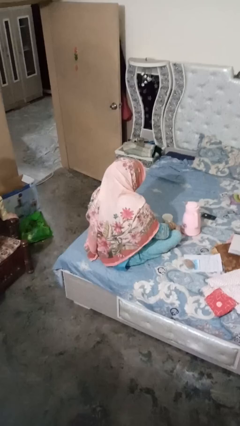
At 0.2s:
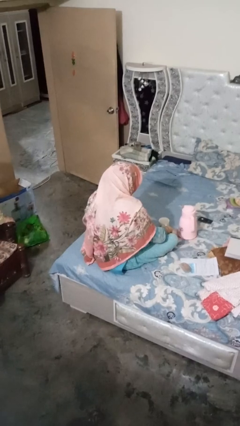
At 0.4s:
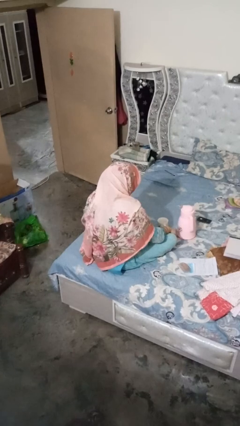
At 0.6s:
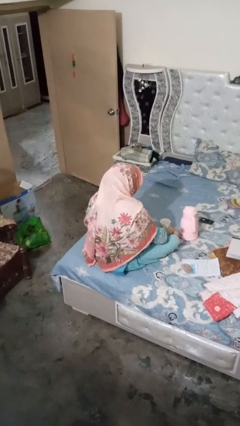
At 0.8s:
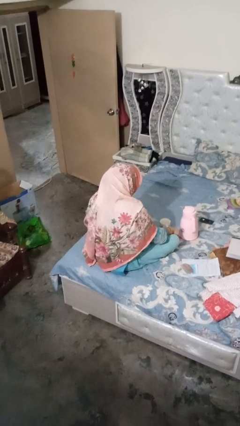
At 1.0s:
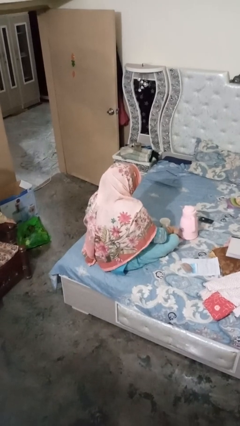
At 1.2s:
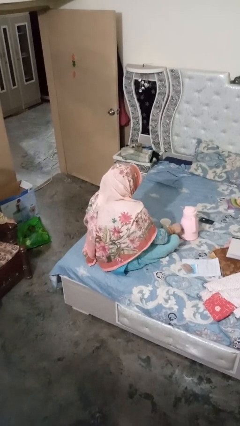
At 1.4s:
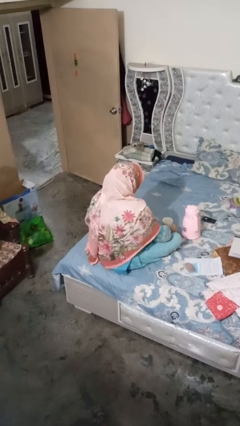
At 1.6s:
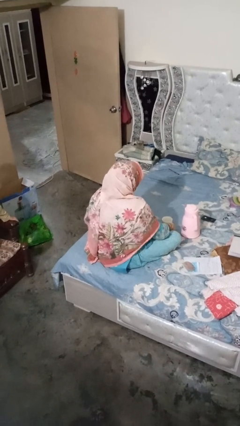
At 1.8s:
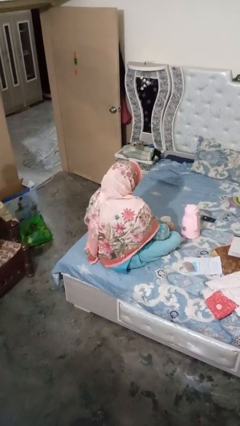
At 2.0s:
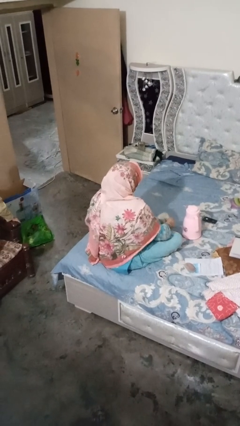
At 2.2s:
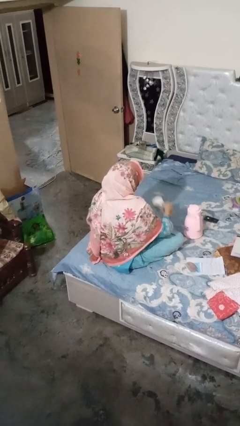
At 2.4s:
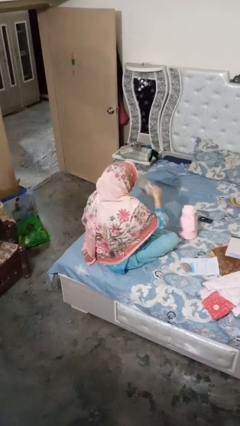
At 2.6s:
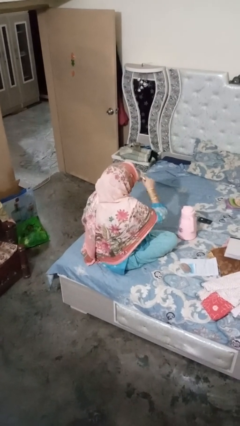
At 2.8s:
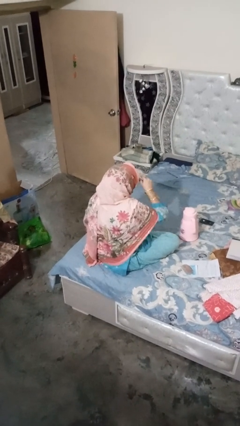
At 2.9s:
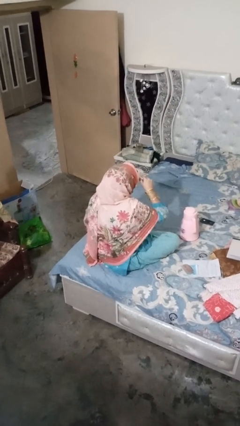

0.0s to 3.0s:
person pours coffee into mug

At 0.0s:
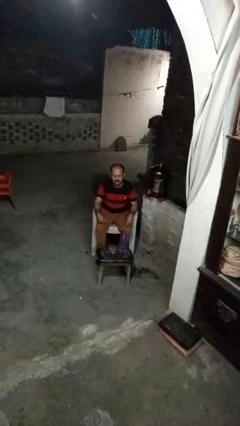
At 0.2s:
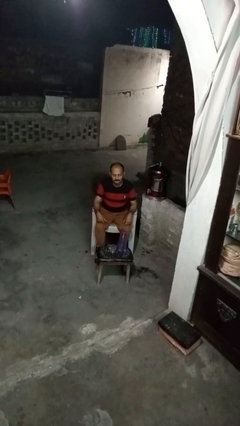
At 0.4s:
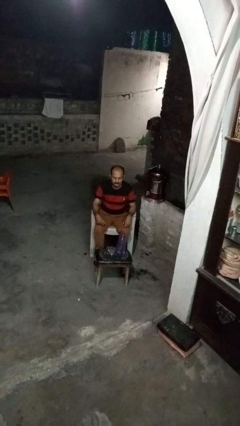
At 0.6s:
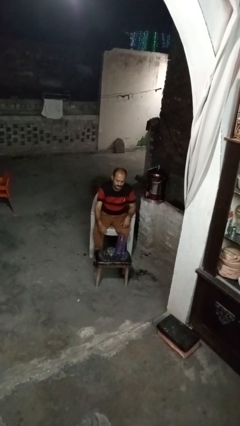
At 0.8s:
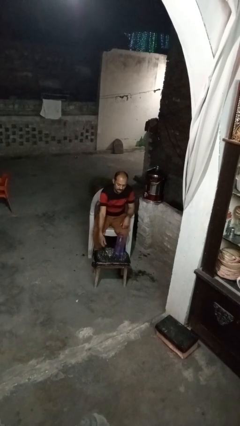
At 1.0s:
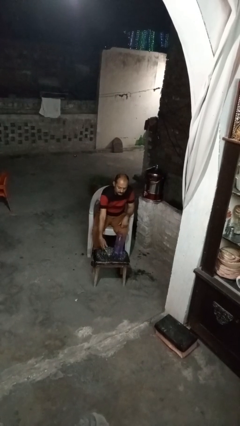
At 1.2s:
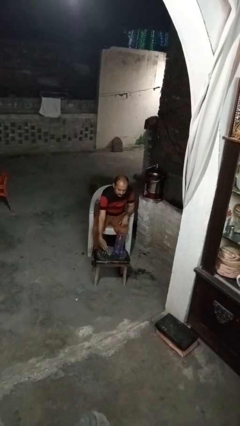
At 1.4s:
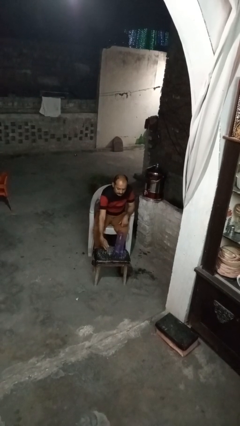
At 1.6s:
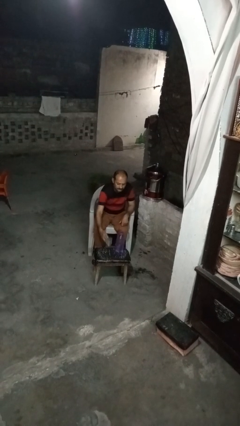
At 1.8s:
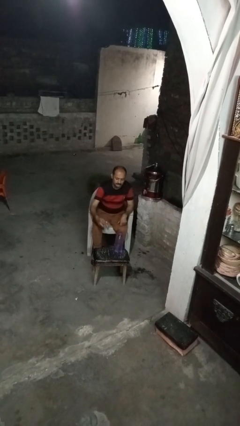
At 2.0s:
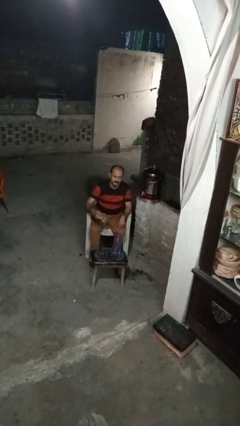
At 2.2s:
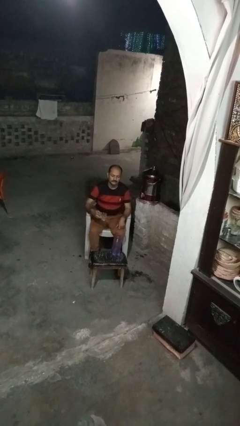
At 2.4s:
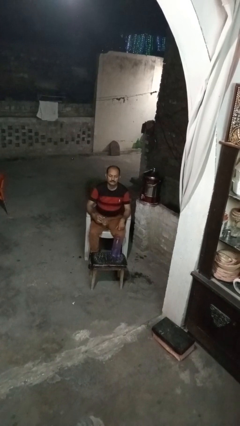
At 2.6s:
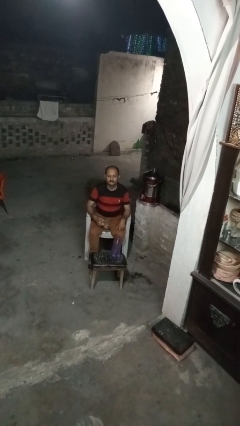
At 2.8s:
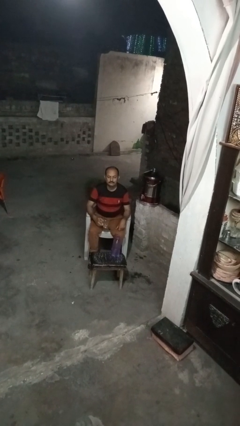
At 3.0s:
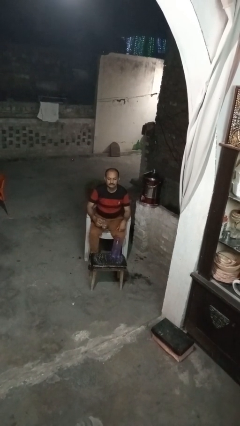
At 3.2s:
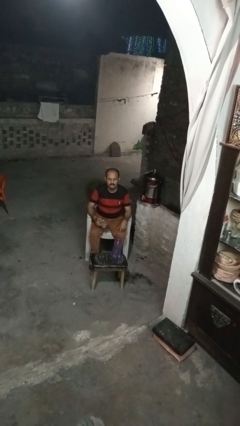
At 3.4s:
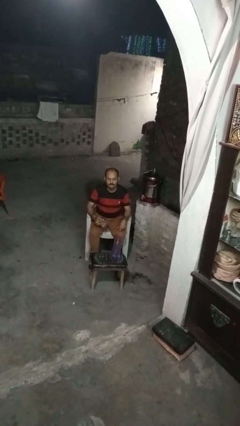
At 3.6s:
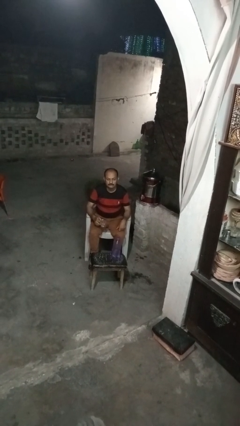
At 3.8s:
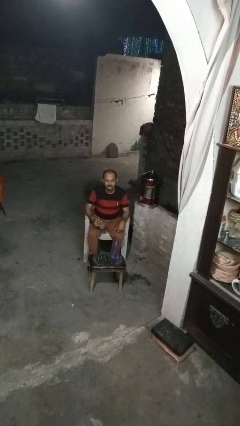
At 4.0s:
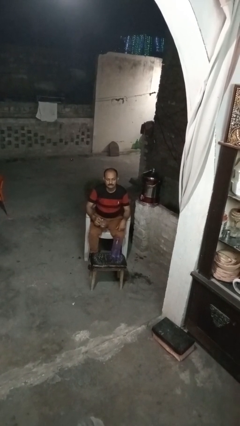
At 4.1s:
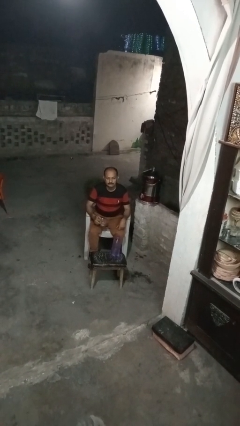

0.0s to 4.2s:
person picks up object from table

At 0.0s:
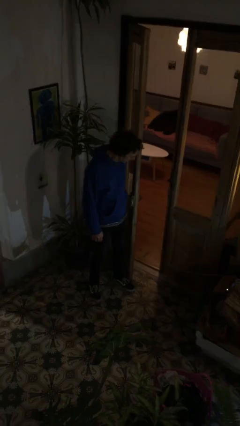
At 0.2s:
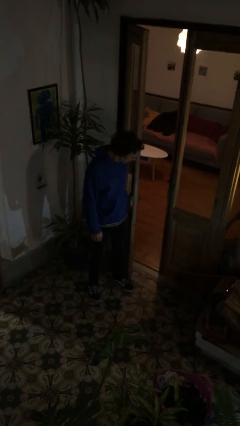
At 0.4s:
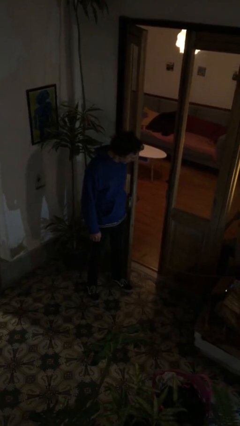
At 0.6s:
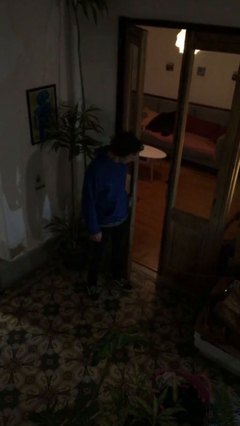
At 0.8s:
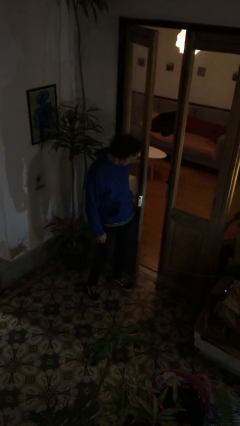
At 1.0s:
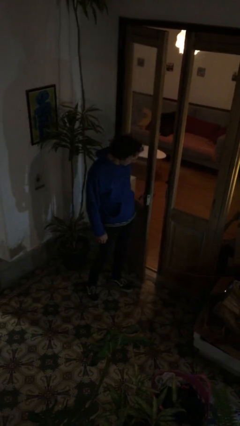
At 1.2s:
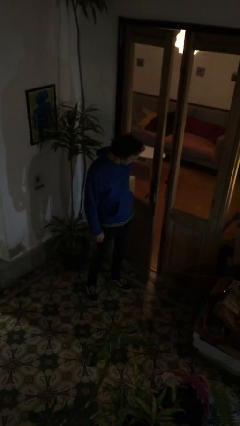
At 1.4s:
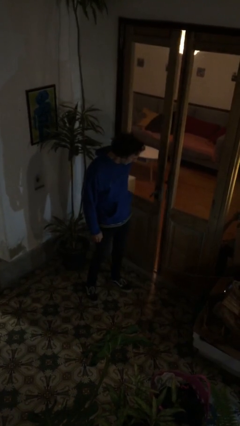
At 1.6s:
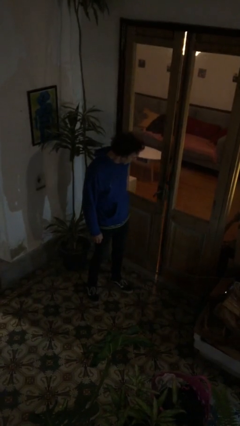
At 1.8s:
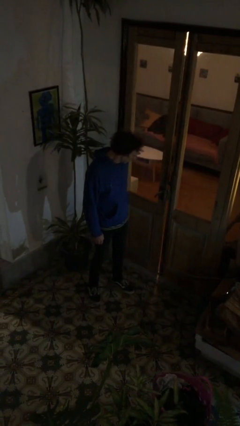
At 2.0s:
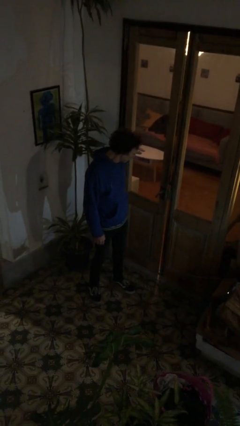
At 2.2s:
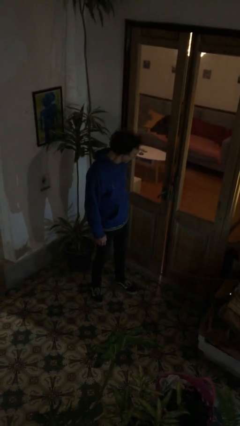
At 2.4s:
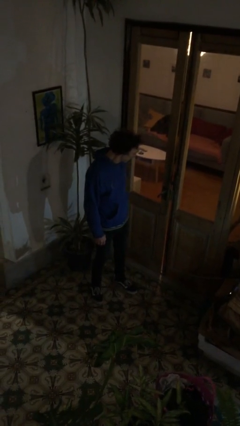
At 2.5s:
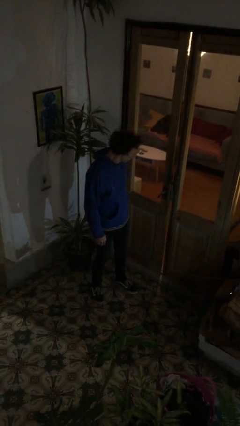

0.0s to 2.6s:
person closes door with hip

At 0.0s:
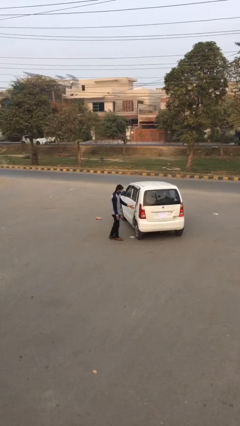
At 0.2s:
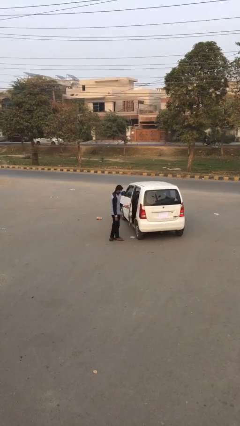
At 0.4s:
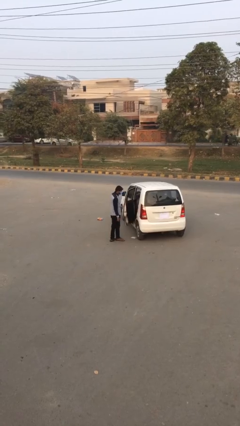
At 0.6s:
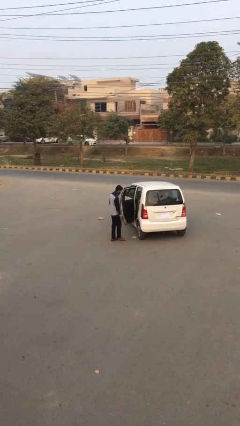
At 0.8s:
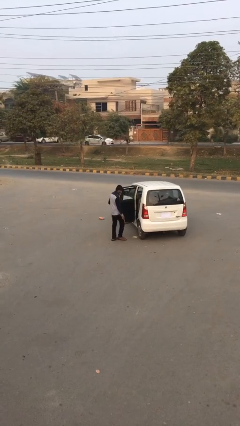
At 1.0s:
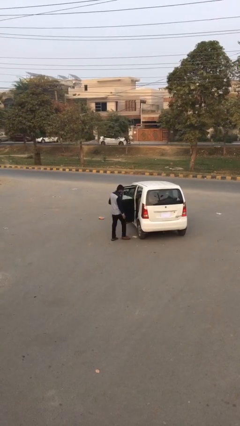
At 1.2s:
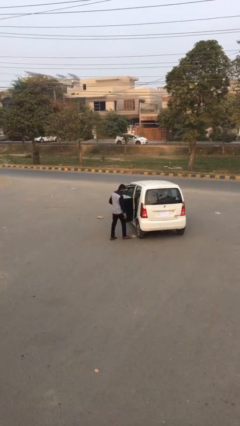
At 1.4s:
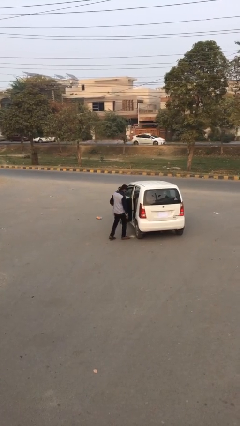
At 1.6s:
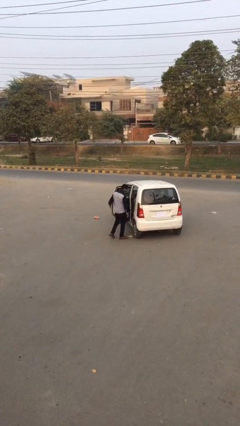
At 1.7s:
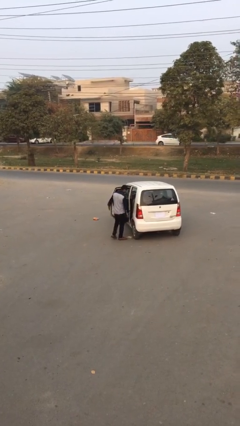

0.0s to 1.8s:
person opens car door

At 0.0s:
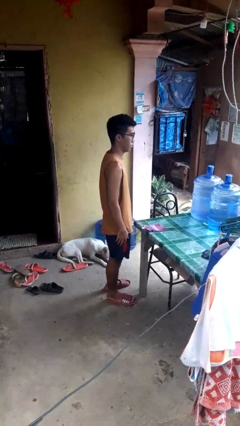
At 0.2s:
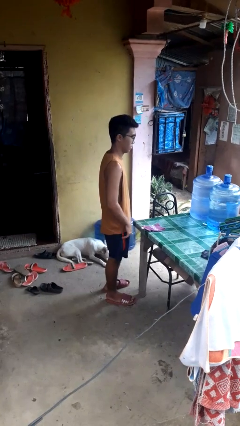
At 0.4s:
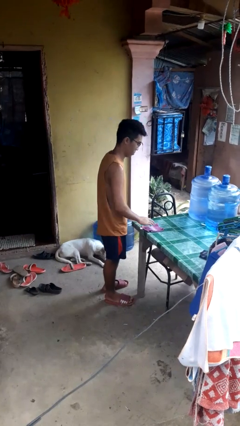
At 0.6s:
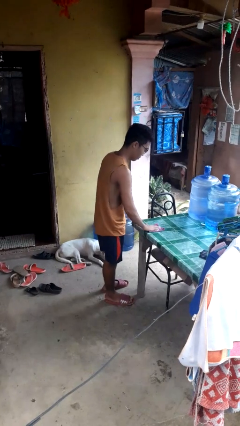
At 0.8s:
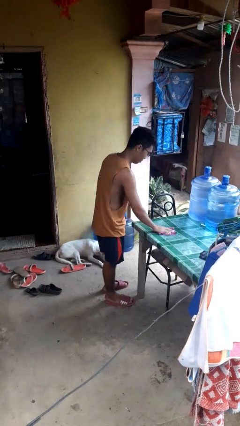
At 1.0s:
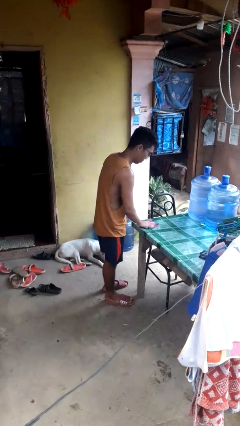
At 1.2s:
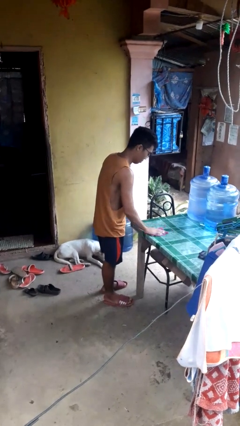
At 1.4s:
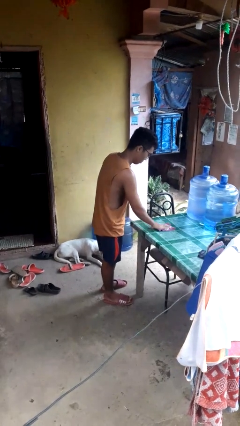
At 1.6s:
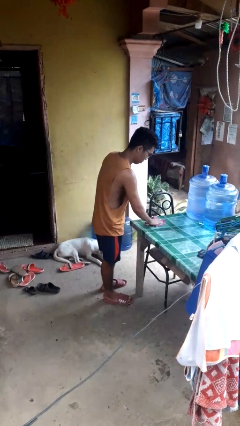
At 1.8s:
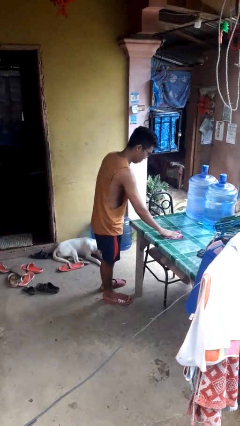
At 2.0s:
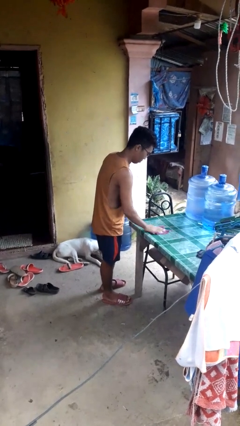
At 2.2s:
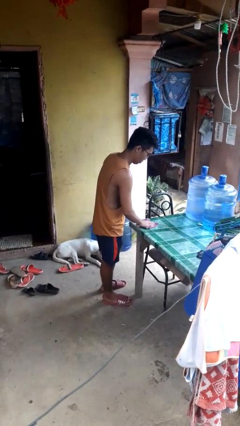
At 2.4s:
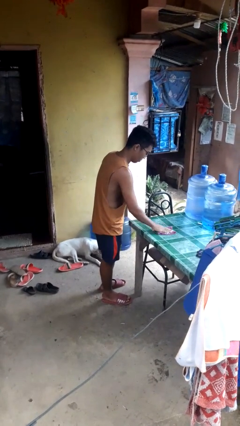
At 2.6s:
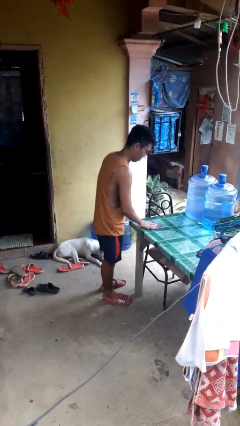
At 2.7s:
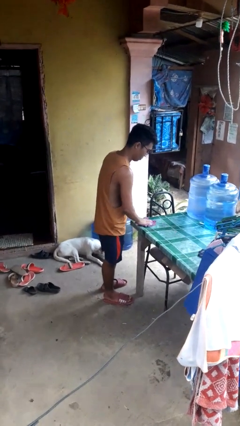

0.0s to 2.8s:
person cleans table with rag

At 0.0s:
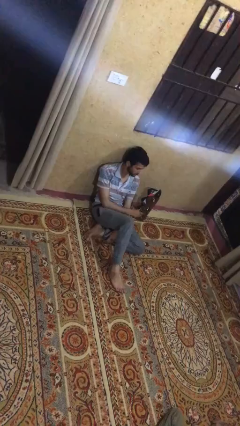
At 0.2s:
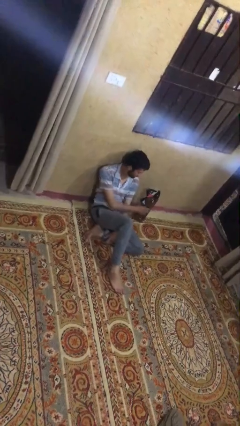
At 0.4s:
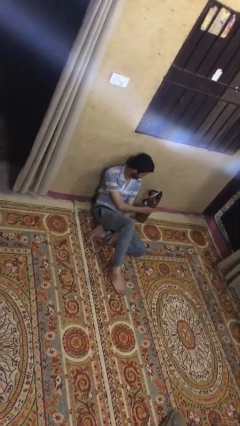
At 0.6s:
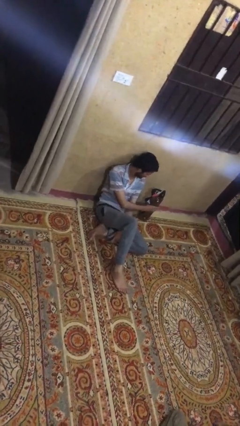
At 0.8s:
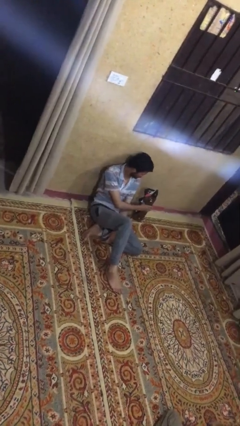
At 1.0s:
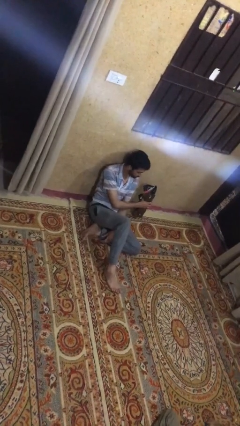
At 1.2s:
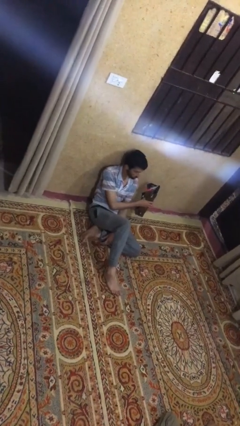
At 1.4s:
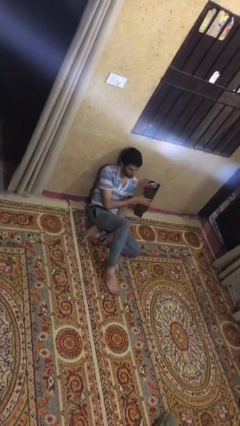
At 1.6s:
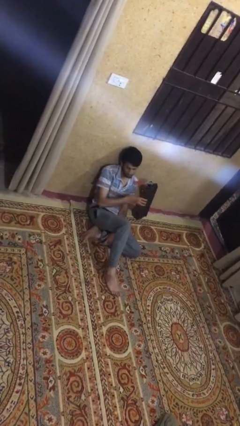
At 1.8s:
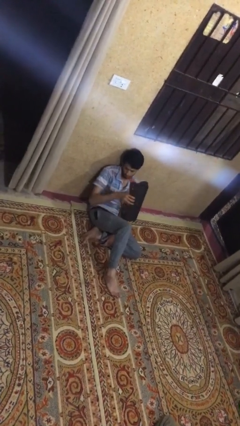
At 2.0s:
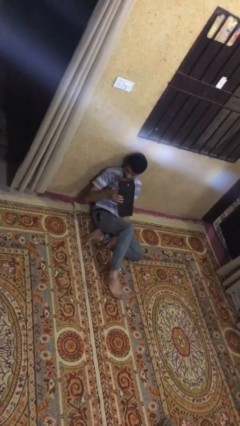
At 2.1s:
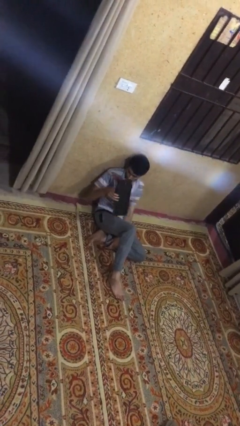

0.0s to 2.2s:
person picks up object from floor

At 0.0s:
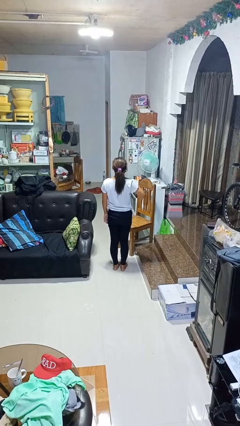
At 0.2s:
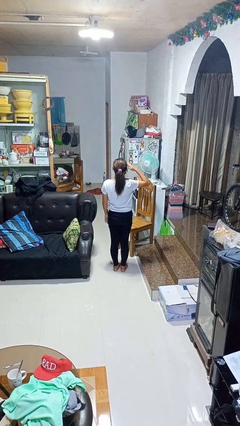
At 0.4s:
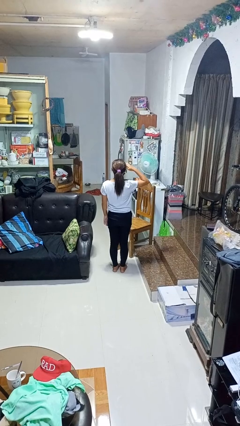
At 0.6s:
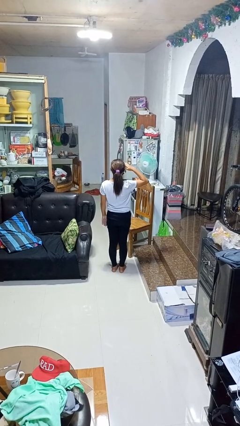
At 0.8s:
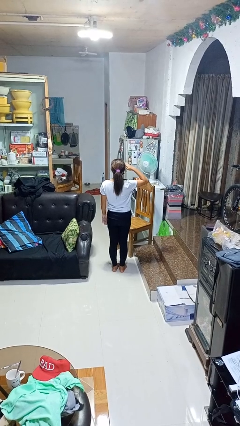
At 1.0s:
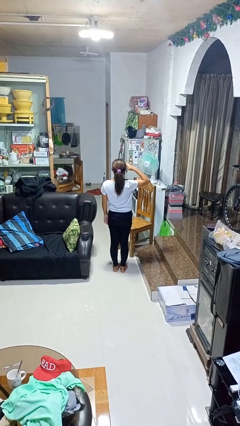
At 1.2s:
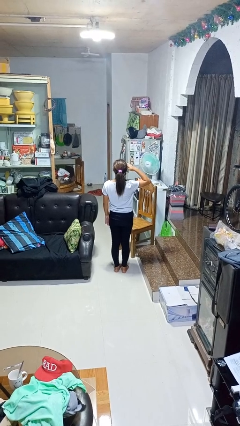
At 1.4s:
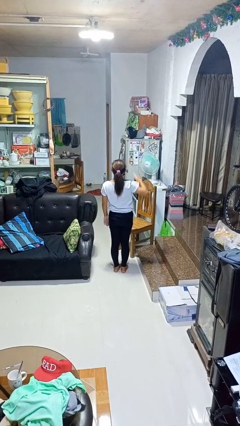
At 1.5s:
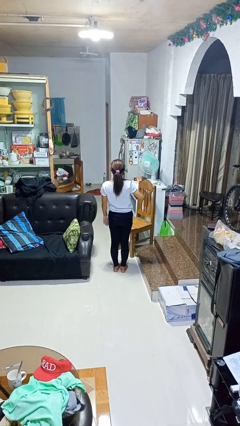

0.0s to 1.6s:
person salutes
